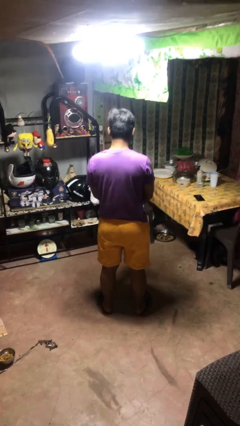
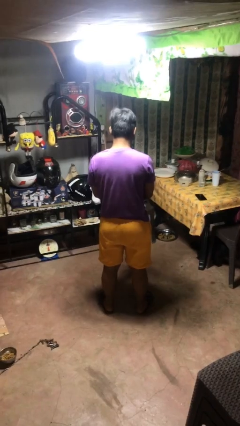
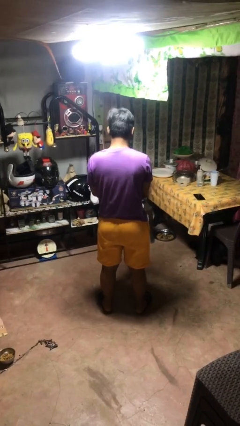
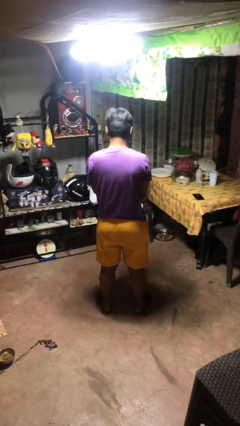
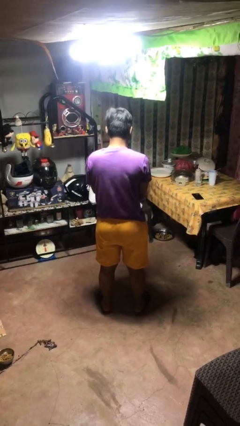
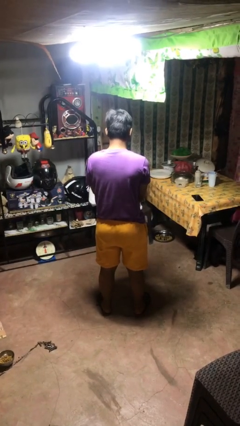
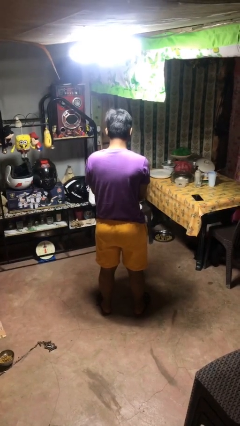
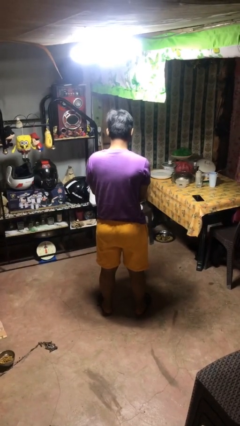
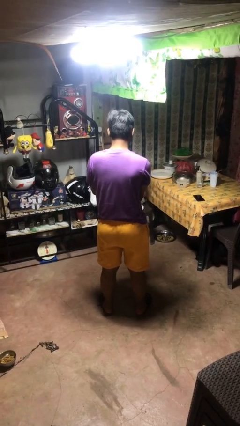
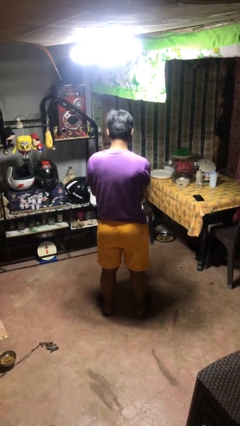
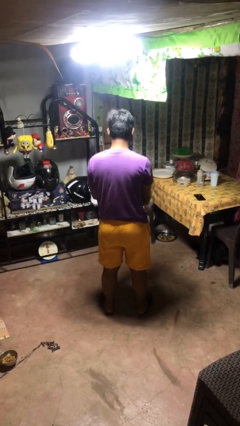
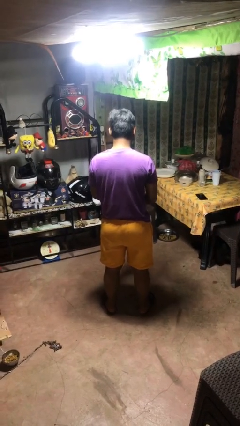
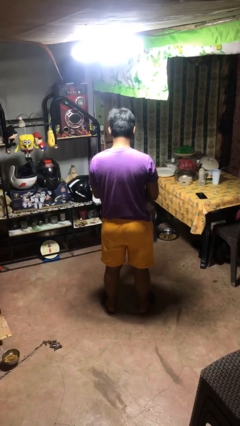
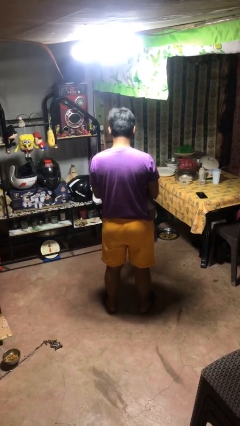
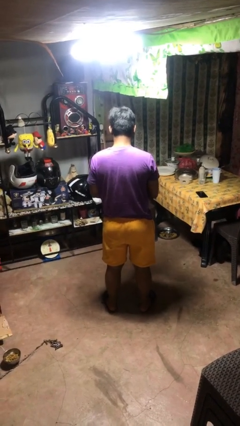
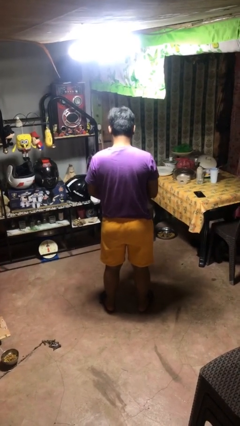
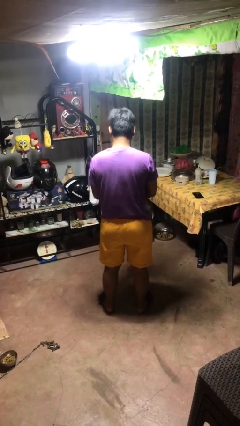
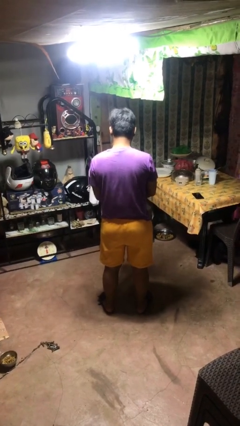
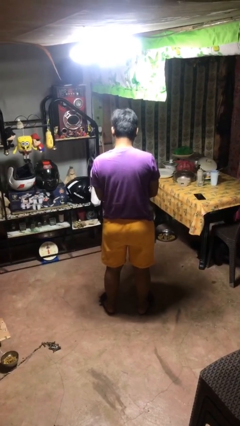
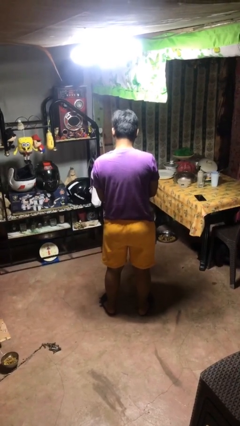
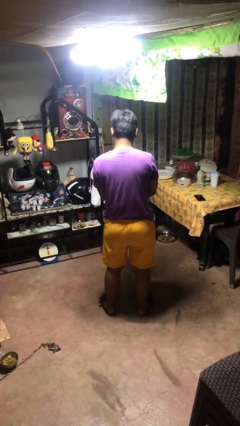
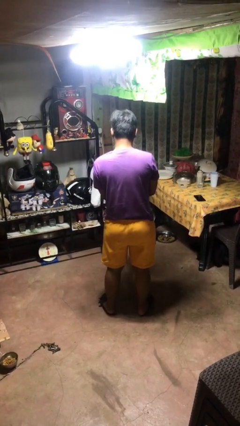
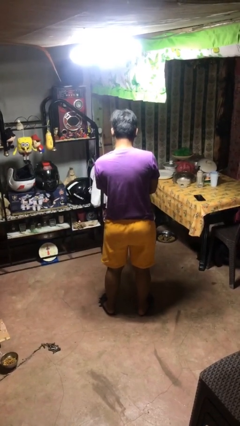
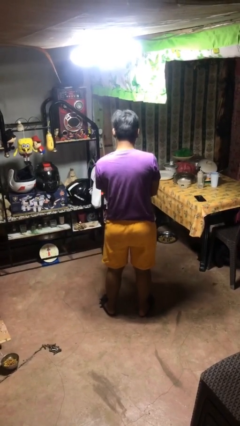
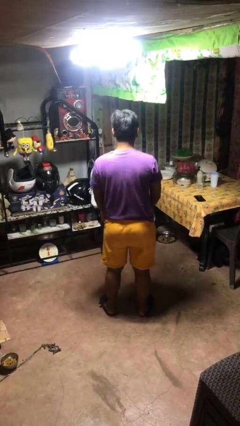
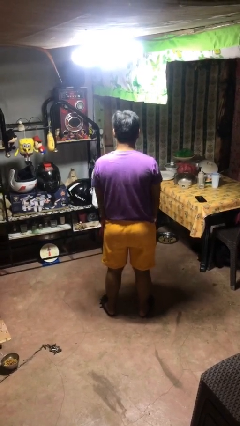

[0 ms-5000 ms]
person puts on gloves

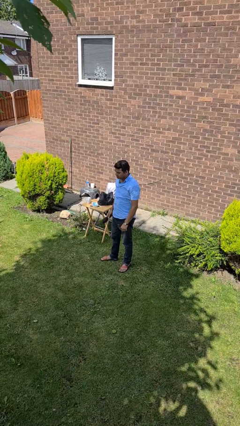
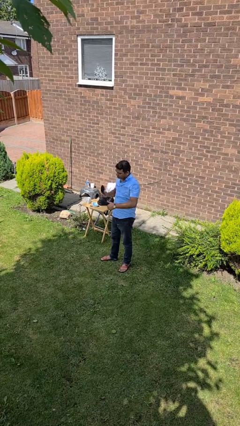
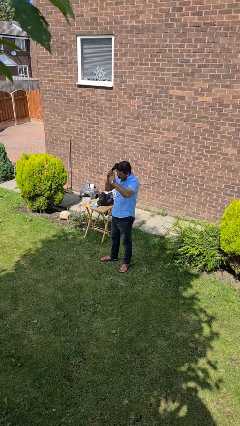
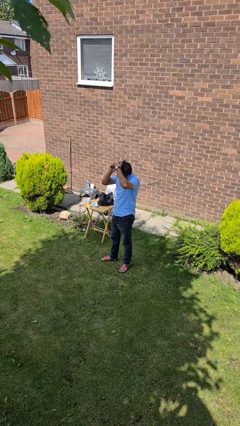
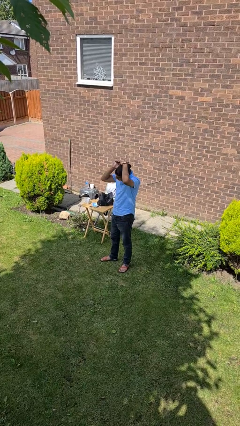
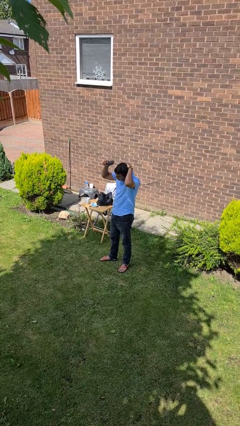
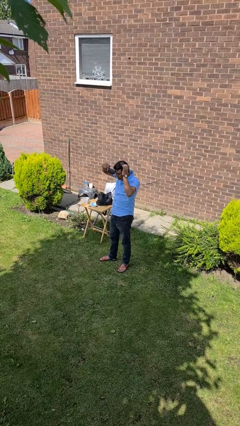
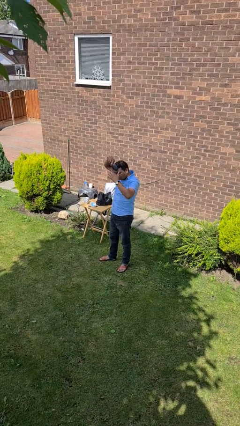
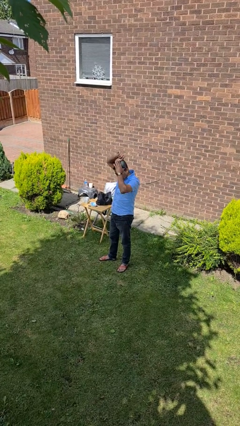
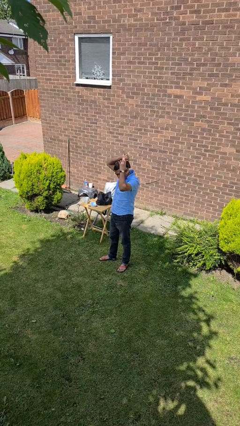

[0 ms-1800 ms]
person brushes hair

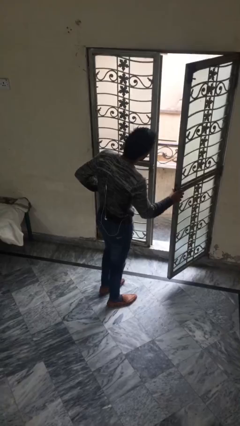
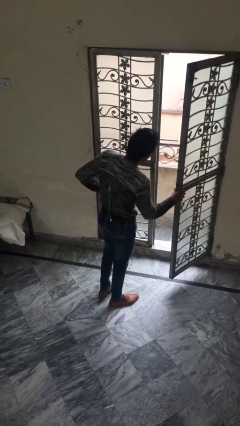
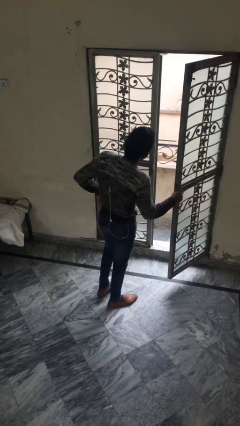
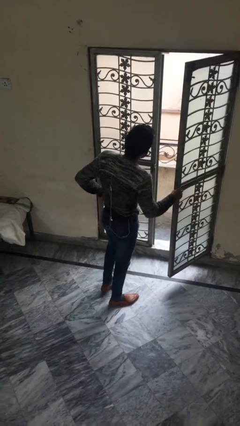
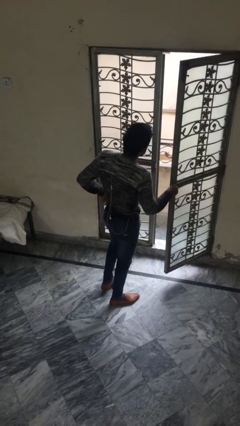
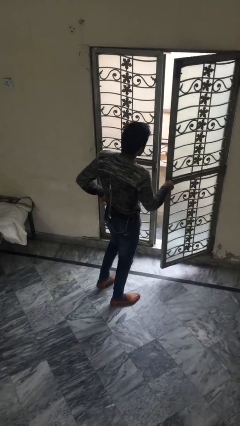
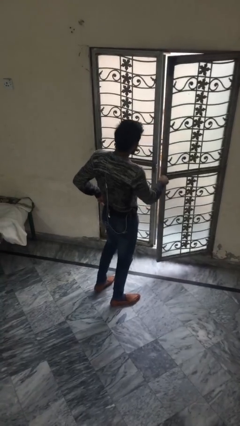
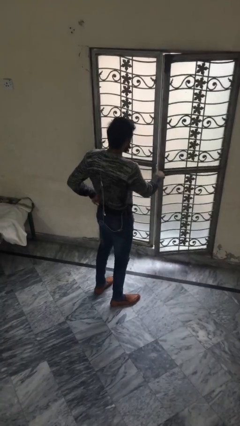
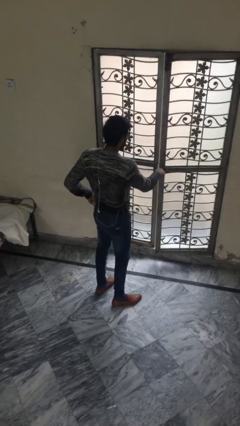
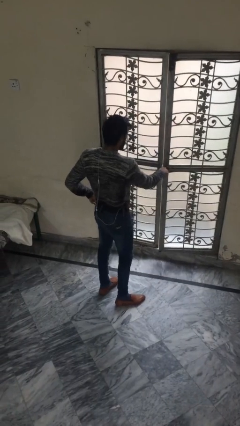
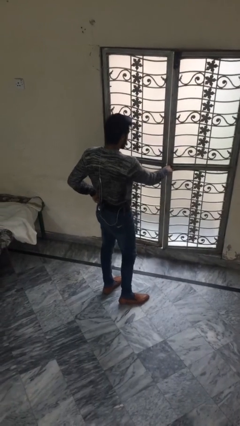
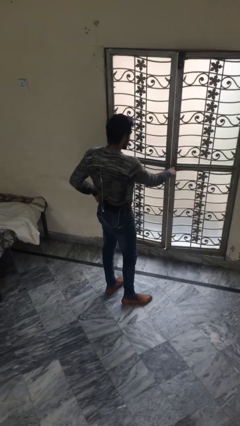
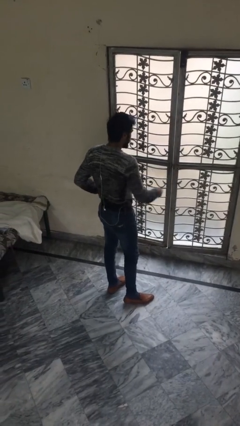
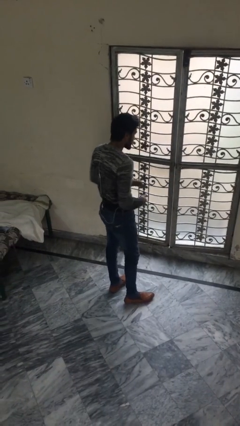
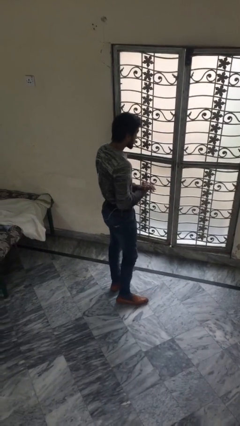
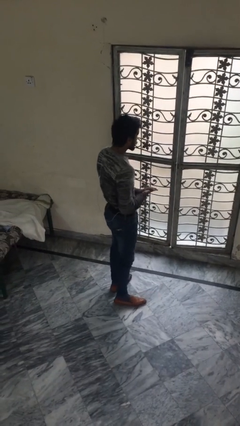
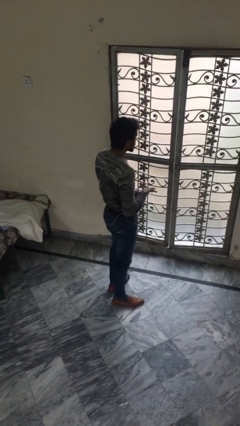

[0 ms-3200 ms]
person closes facility door

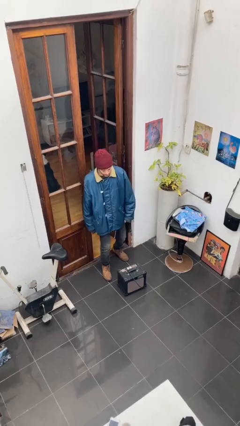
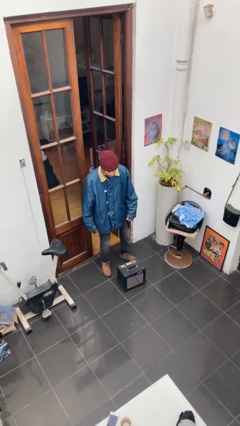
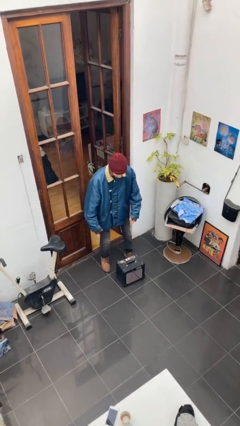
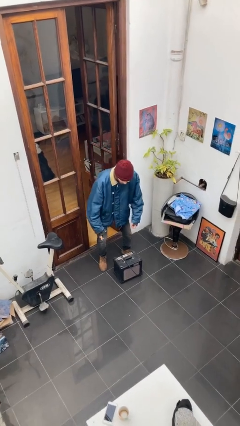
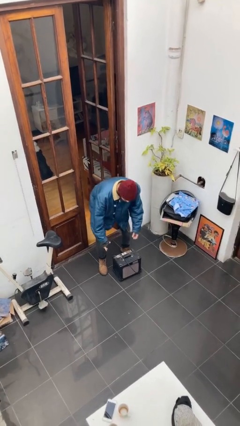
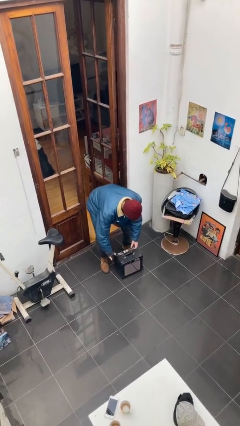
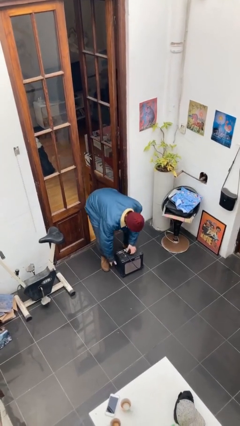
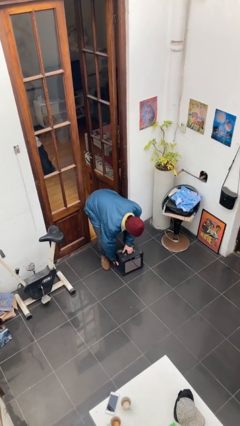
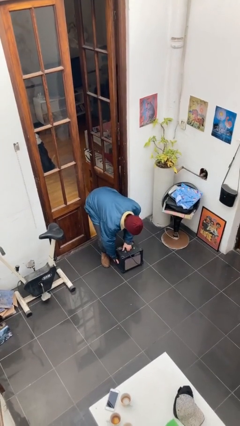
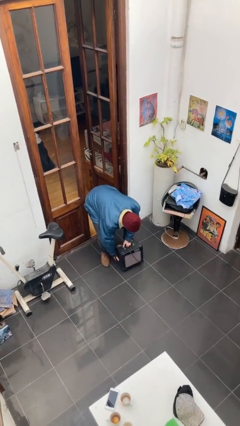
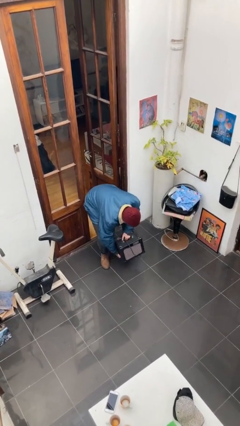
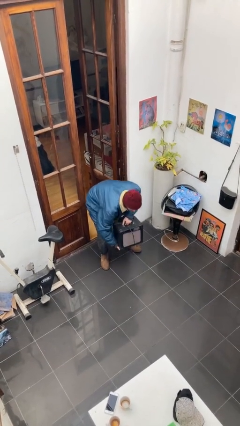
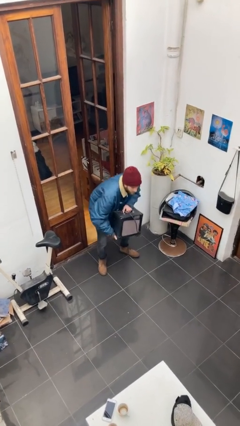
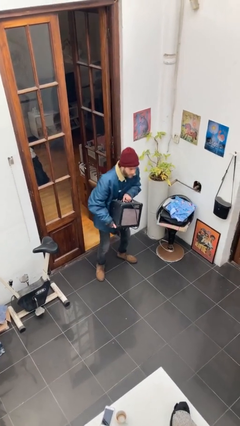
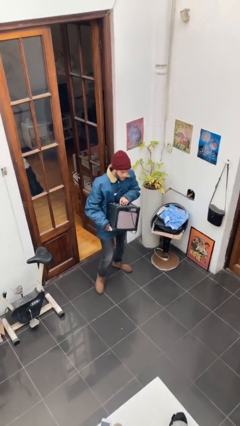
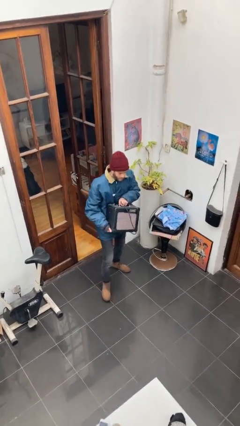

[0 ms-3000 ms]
person picks up object from floor

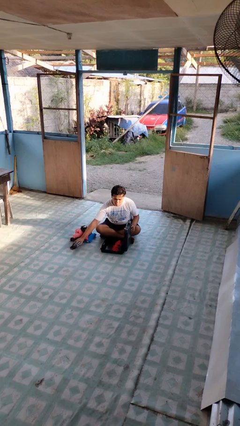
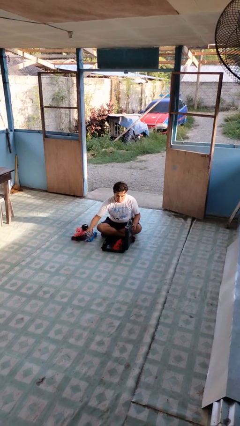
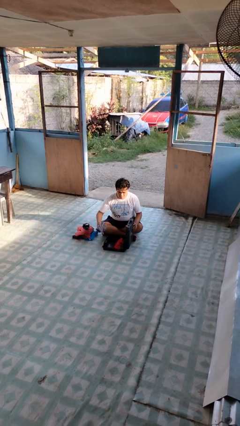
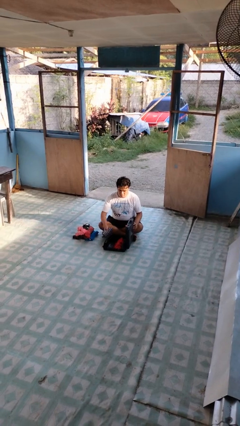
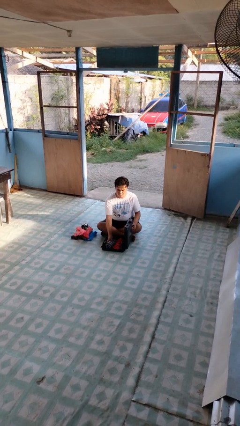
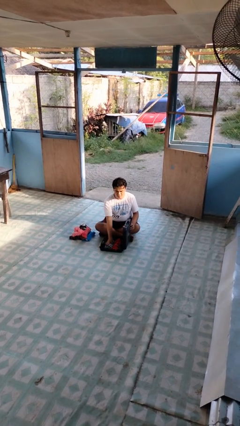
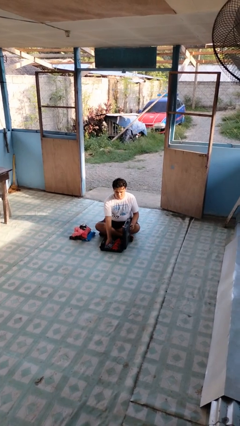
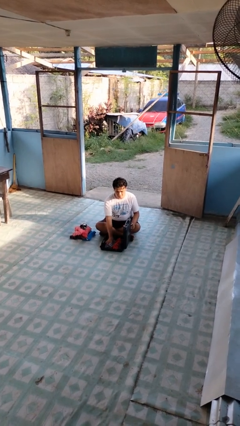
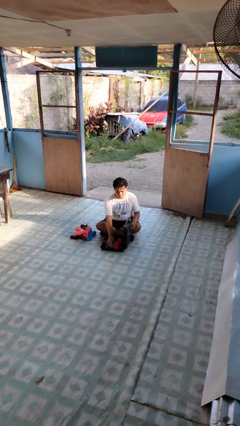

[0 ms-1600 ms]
person loads clothes into suitcase

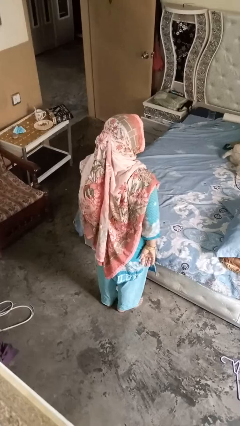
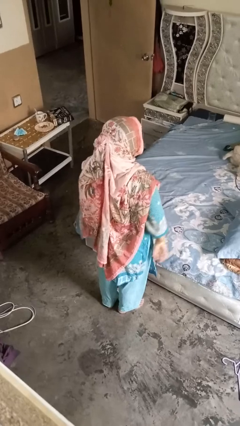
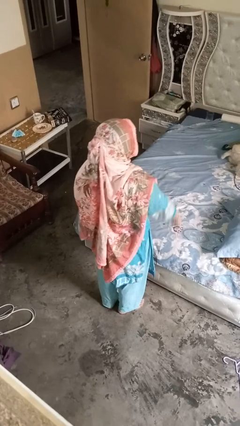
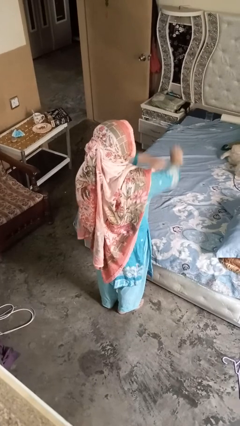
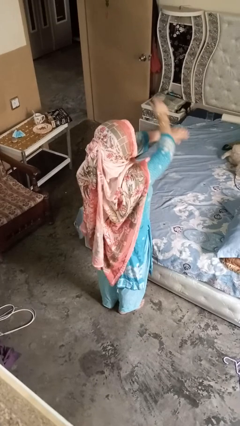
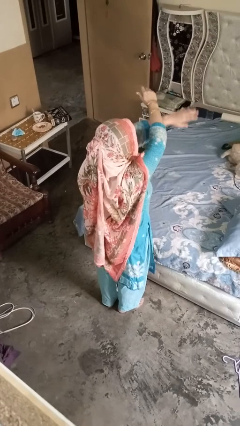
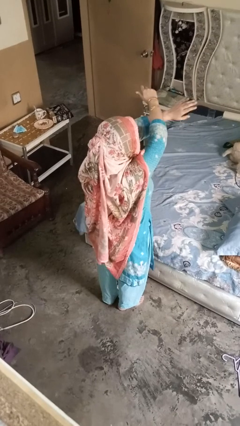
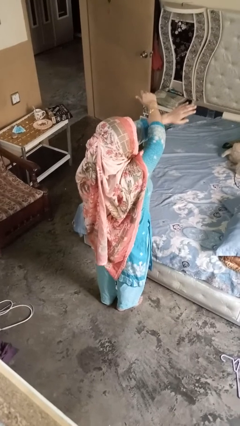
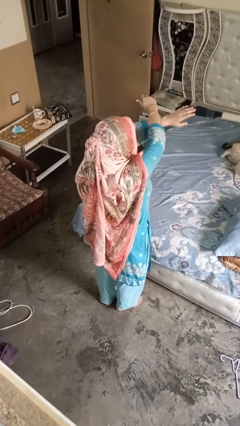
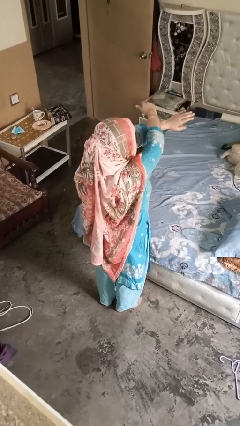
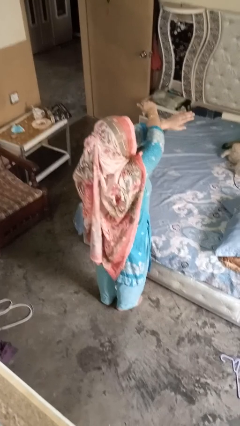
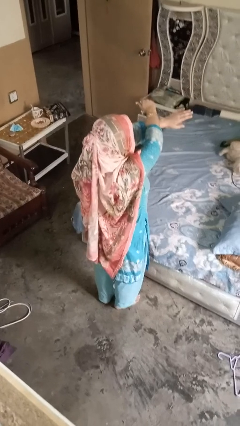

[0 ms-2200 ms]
person gestures arms x

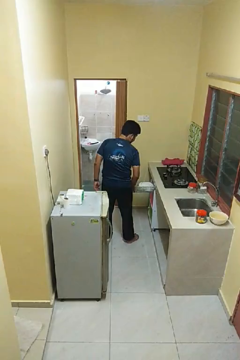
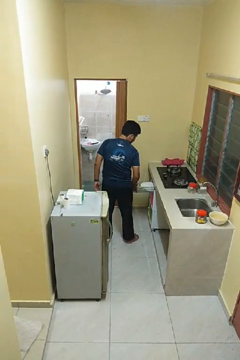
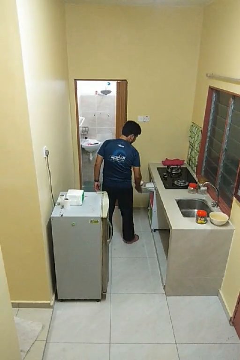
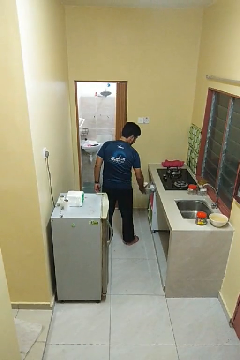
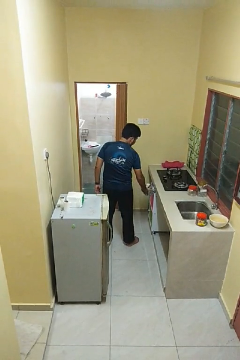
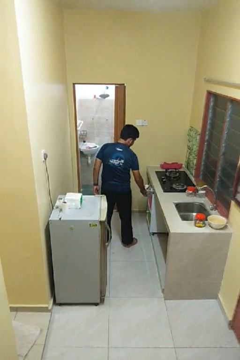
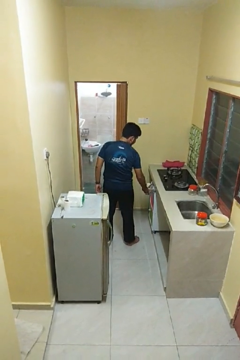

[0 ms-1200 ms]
person closes kitchen drawer
